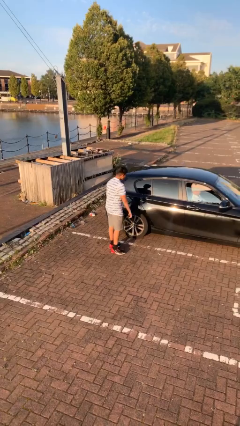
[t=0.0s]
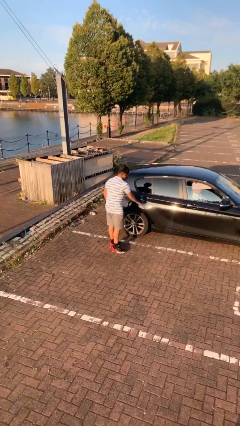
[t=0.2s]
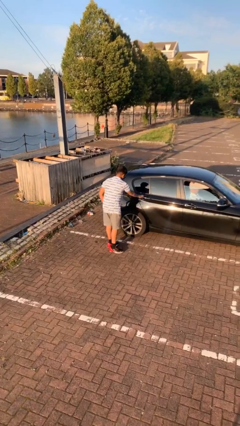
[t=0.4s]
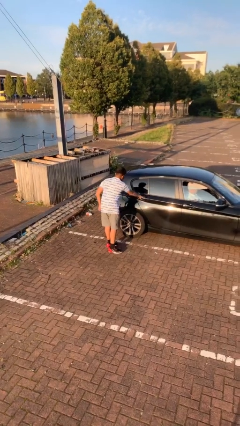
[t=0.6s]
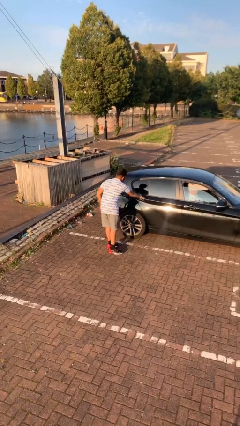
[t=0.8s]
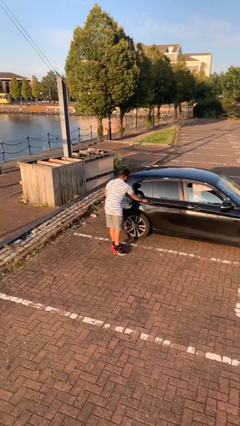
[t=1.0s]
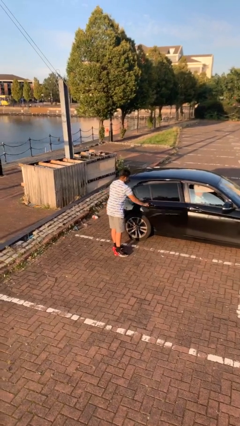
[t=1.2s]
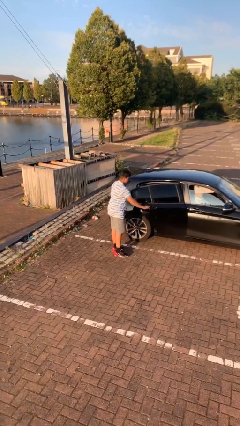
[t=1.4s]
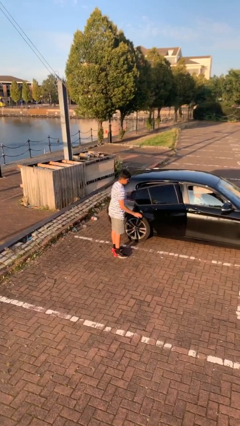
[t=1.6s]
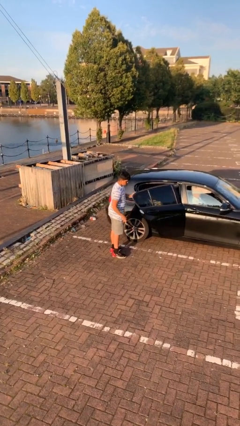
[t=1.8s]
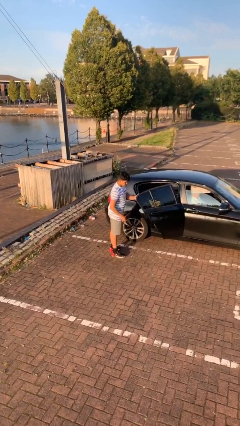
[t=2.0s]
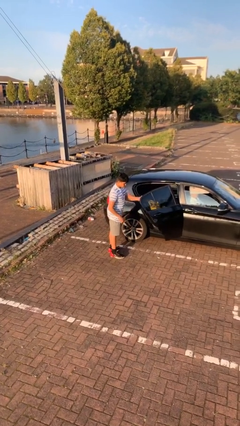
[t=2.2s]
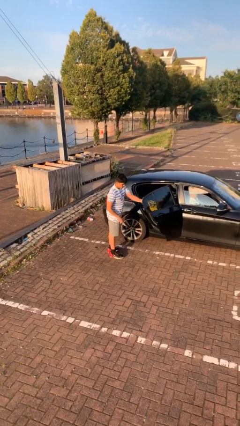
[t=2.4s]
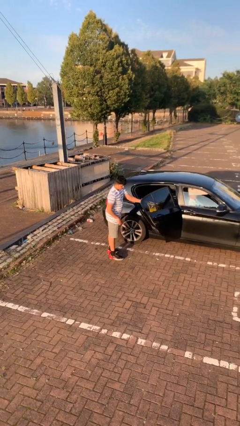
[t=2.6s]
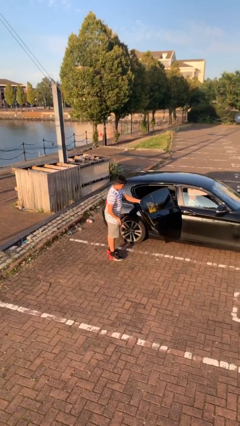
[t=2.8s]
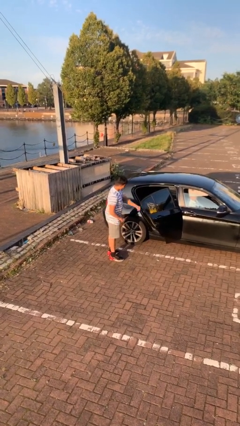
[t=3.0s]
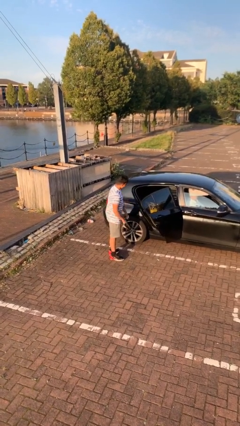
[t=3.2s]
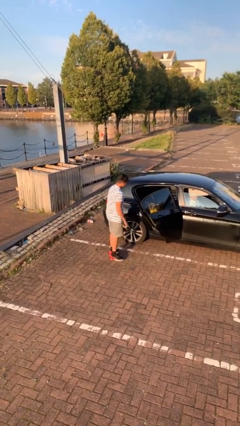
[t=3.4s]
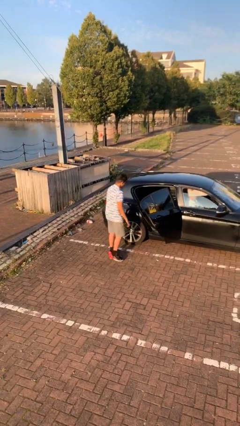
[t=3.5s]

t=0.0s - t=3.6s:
person opens car door

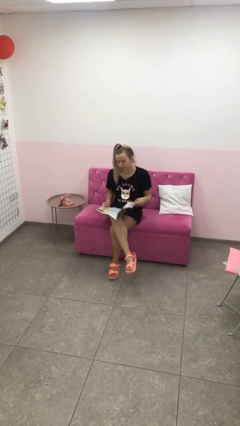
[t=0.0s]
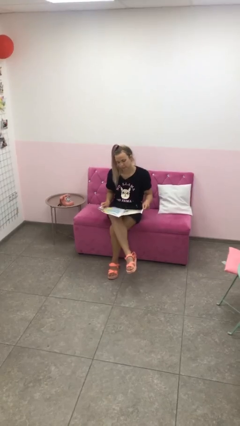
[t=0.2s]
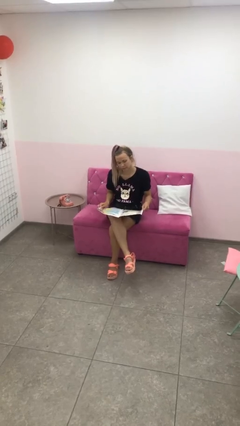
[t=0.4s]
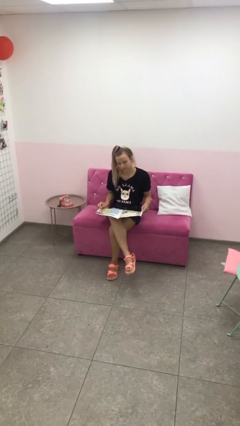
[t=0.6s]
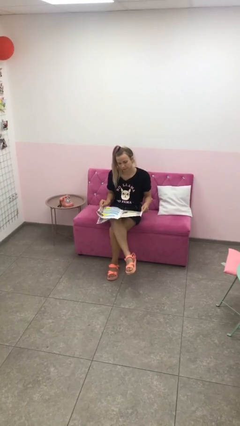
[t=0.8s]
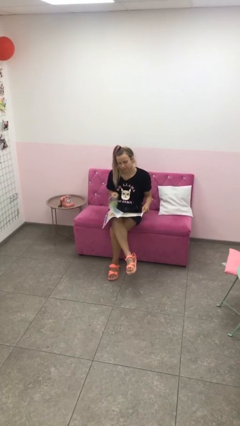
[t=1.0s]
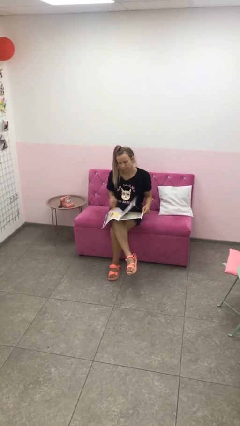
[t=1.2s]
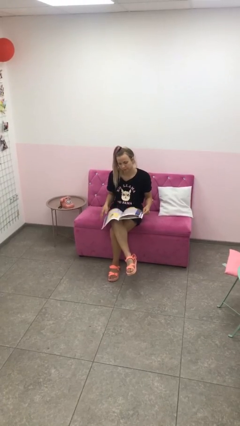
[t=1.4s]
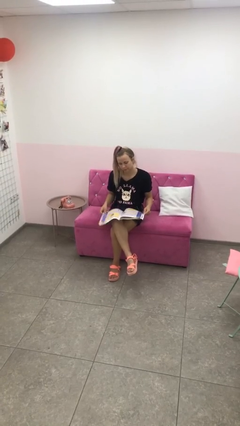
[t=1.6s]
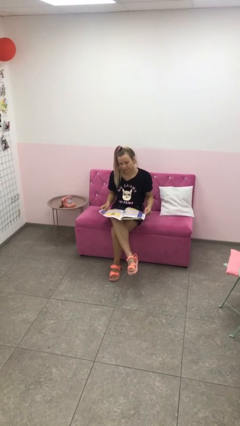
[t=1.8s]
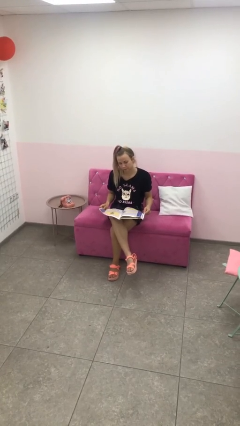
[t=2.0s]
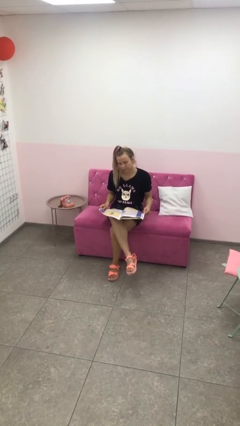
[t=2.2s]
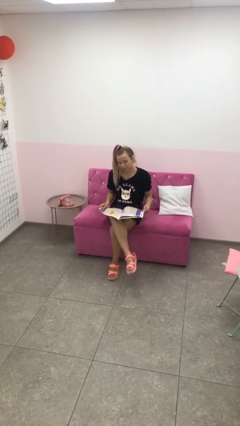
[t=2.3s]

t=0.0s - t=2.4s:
person reads magazine

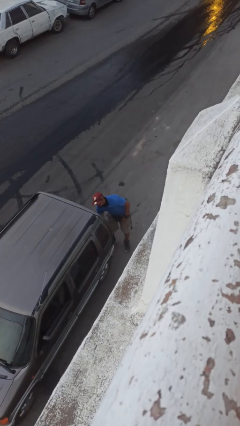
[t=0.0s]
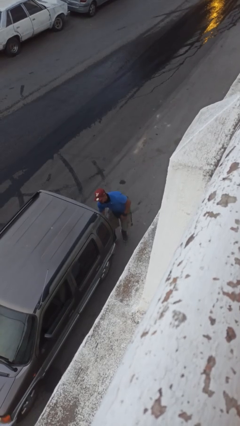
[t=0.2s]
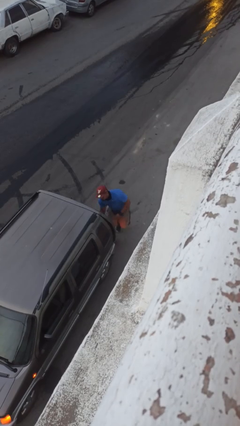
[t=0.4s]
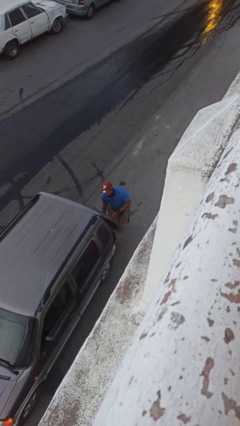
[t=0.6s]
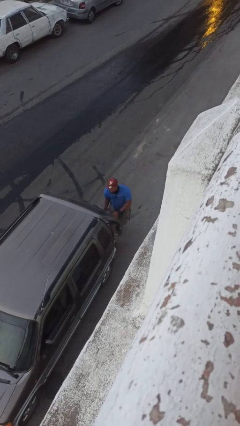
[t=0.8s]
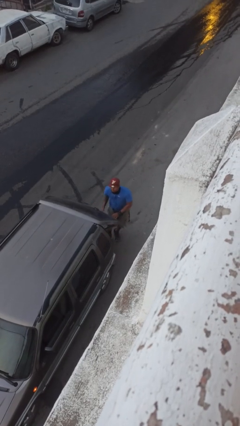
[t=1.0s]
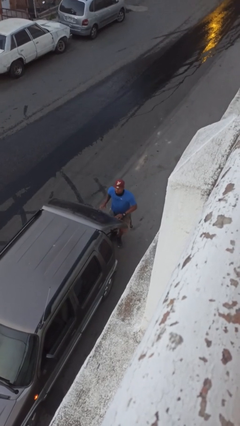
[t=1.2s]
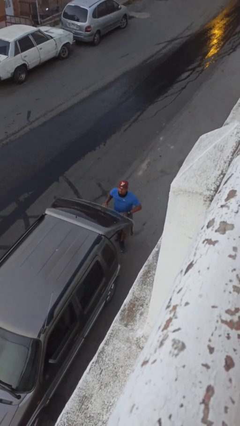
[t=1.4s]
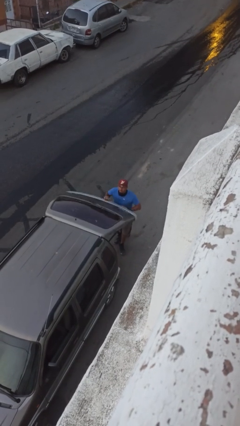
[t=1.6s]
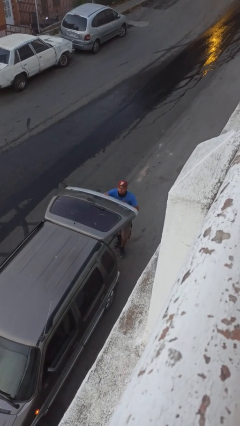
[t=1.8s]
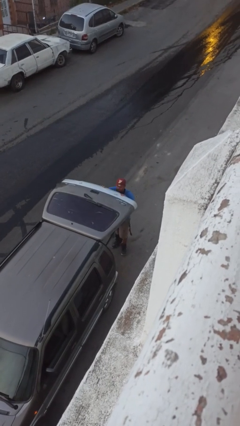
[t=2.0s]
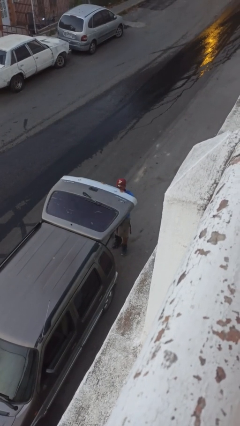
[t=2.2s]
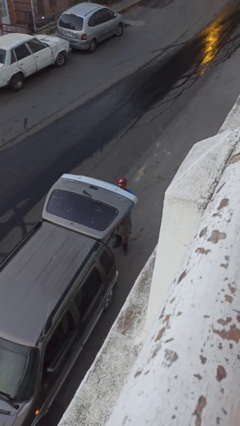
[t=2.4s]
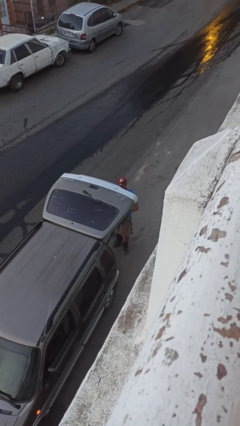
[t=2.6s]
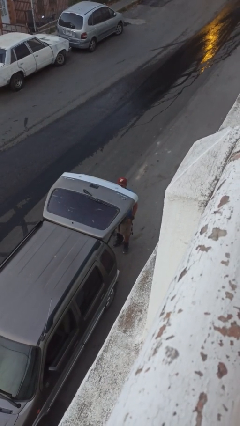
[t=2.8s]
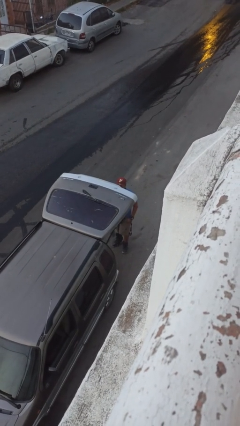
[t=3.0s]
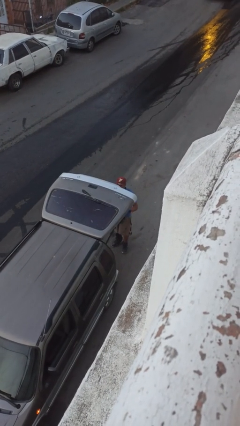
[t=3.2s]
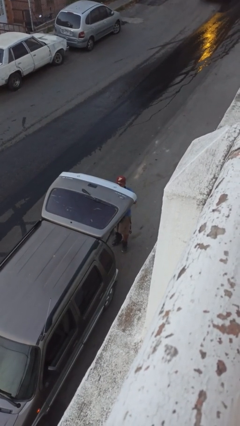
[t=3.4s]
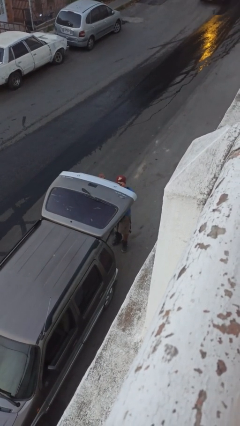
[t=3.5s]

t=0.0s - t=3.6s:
person opens car trunk

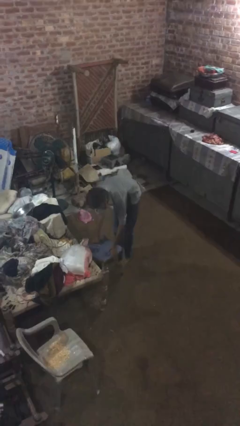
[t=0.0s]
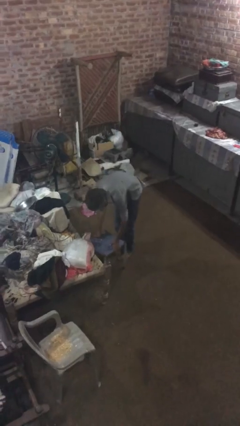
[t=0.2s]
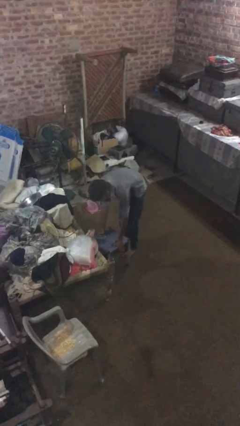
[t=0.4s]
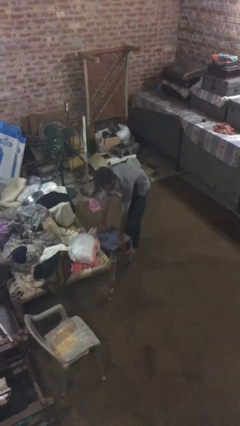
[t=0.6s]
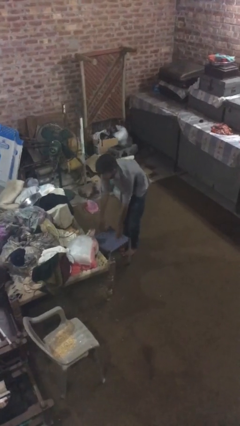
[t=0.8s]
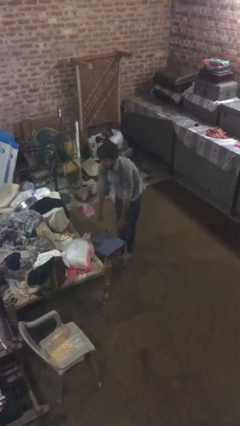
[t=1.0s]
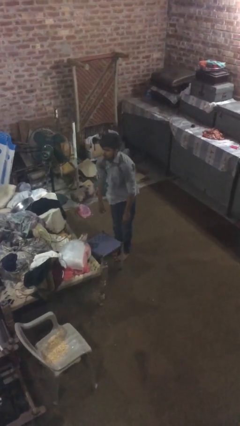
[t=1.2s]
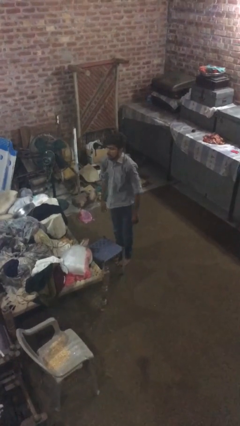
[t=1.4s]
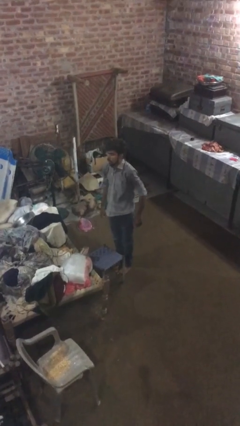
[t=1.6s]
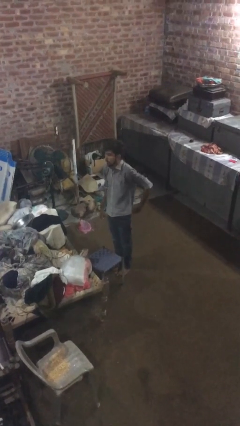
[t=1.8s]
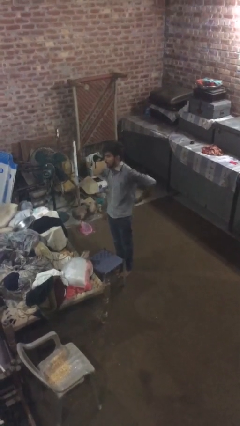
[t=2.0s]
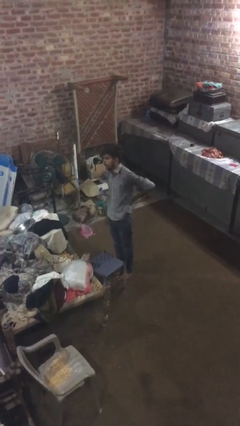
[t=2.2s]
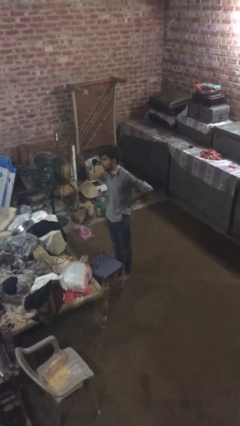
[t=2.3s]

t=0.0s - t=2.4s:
person puts down object on floor

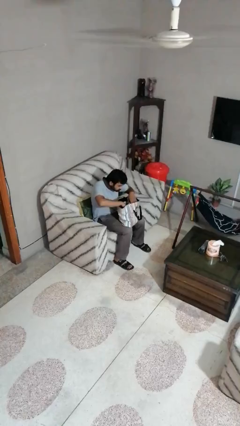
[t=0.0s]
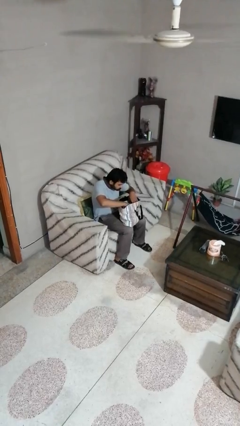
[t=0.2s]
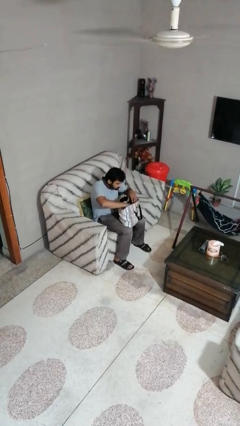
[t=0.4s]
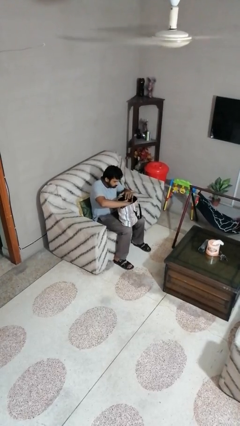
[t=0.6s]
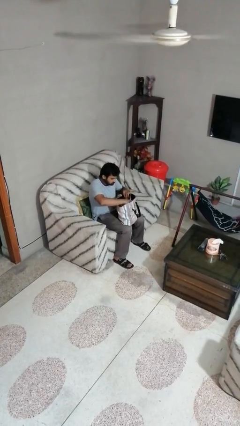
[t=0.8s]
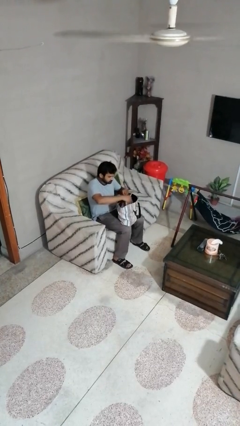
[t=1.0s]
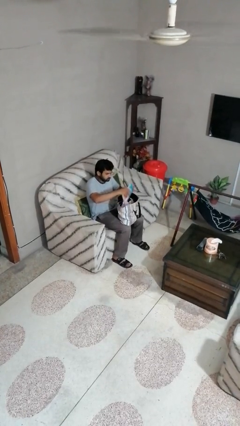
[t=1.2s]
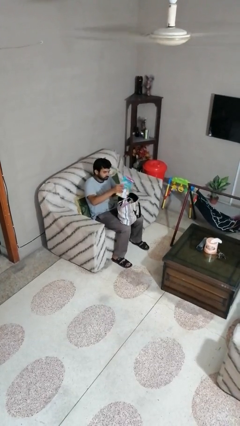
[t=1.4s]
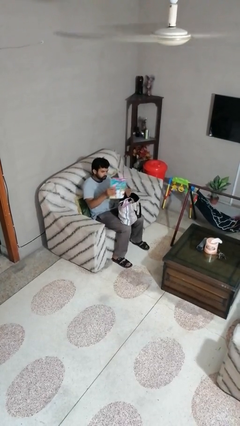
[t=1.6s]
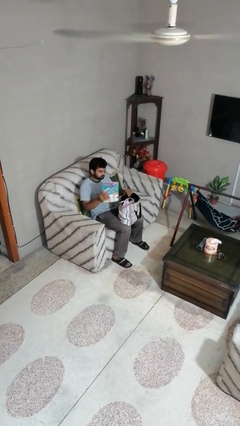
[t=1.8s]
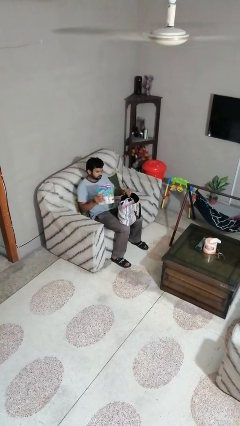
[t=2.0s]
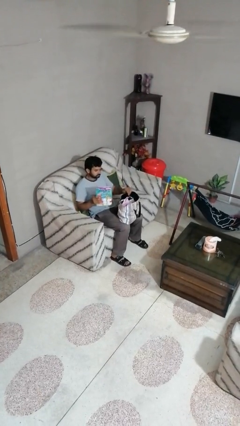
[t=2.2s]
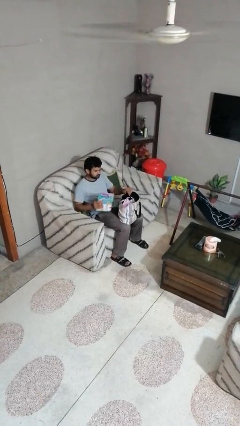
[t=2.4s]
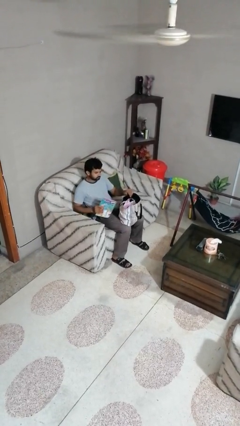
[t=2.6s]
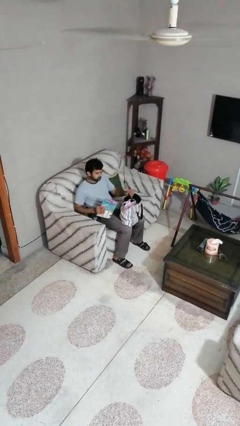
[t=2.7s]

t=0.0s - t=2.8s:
person takes object from backpack

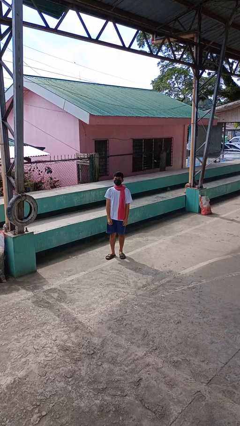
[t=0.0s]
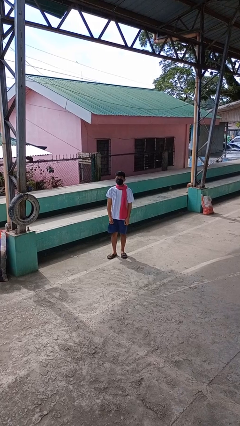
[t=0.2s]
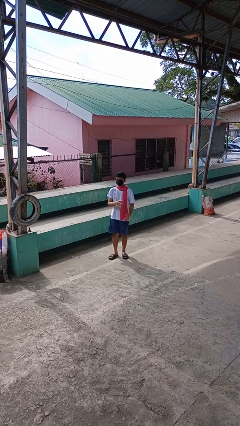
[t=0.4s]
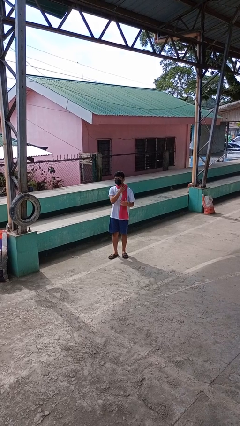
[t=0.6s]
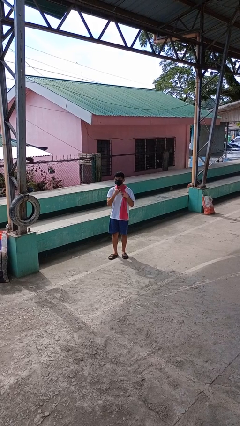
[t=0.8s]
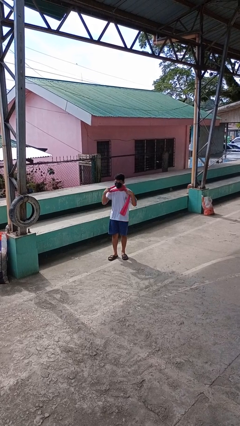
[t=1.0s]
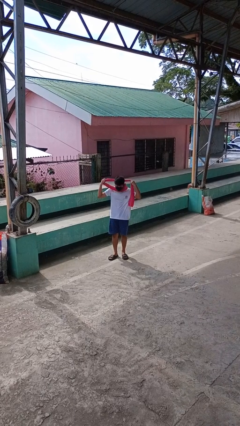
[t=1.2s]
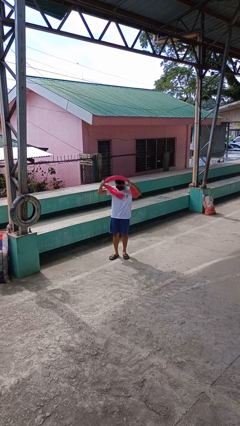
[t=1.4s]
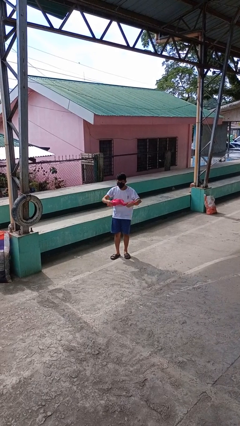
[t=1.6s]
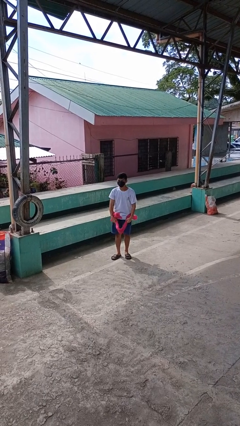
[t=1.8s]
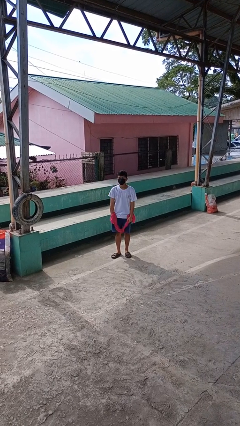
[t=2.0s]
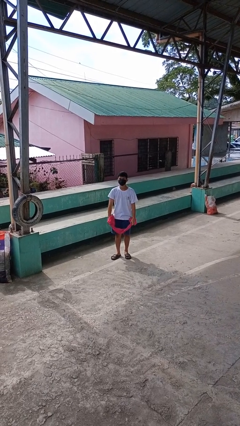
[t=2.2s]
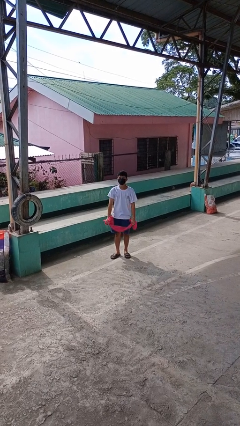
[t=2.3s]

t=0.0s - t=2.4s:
person takes off scarf

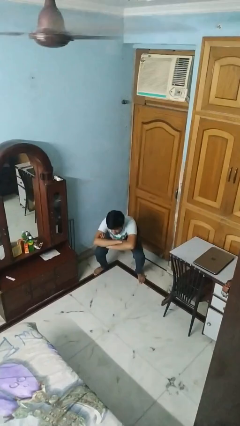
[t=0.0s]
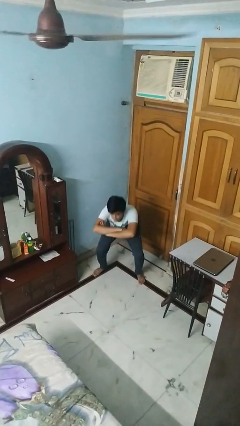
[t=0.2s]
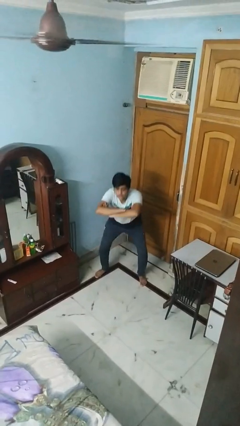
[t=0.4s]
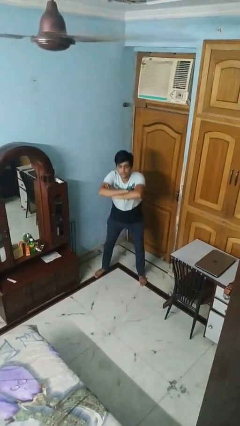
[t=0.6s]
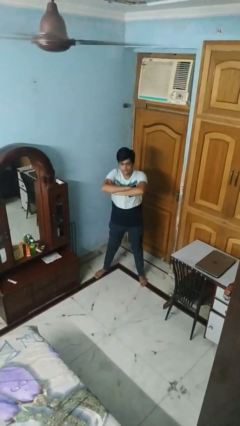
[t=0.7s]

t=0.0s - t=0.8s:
person stands up
